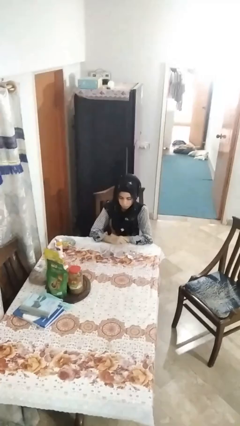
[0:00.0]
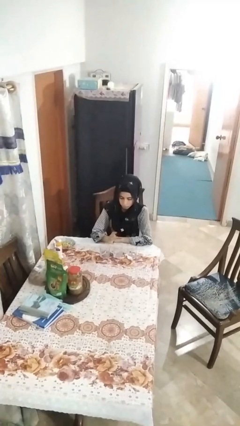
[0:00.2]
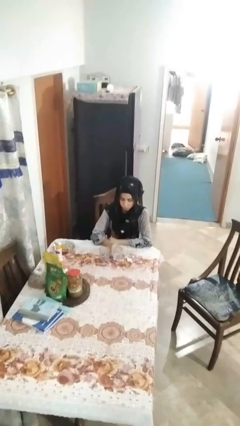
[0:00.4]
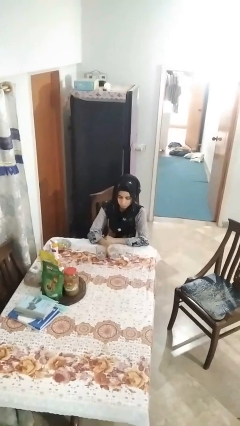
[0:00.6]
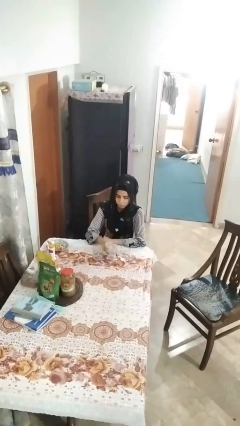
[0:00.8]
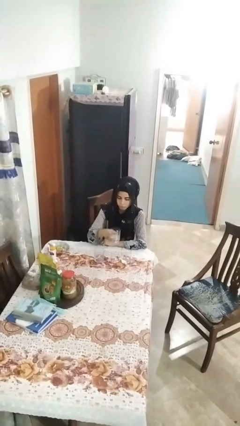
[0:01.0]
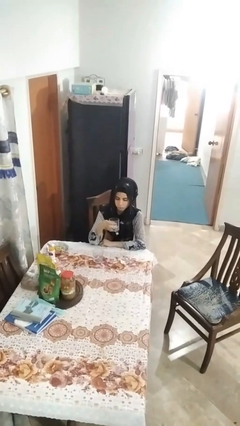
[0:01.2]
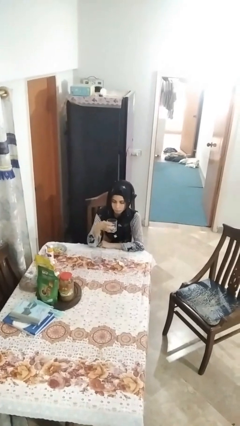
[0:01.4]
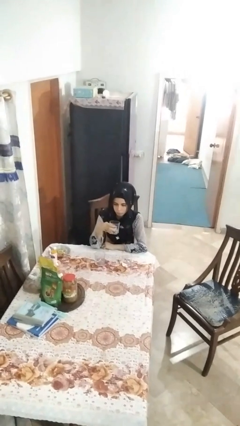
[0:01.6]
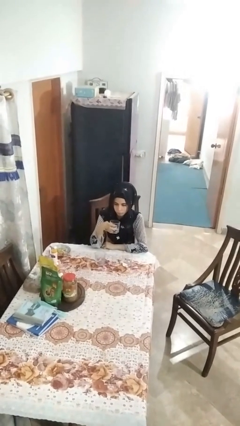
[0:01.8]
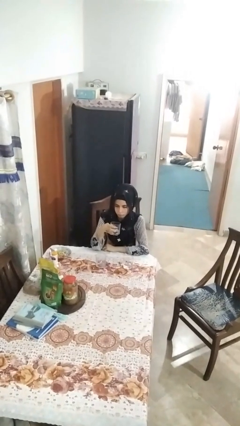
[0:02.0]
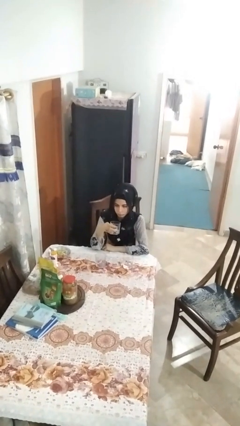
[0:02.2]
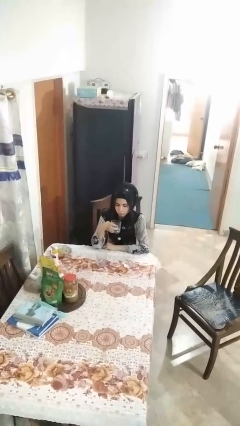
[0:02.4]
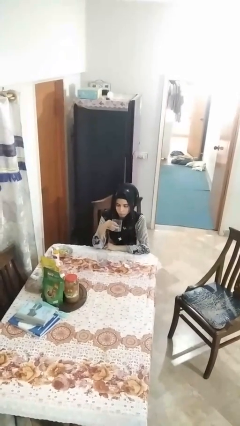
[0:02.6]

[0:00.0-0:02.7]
person picks up object from table

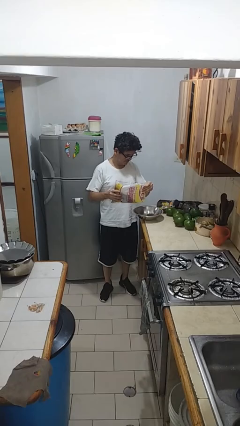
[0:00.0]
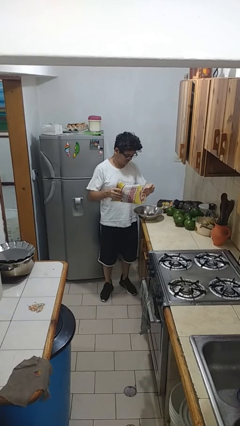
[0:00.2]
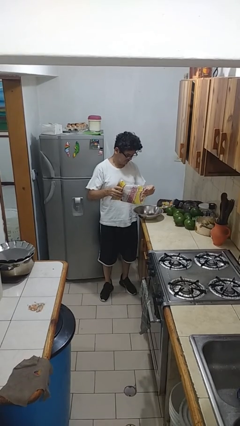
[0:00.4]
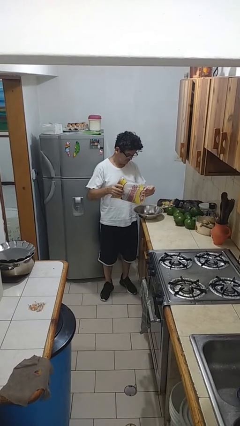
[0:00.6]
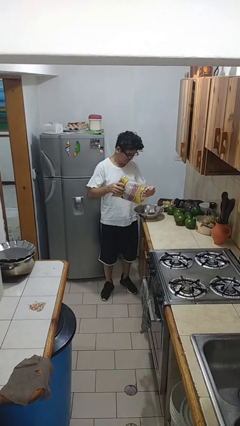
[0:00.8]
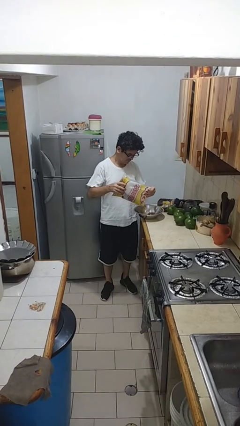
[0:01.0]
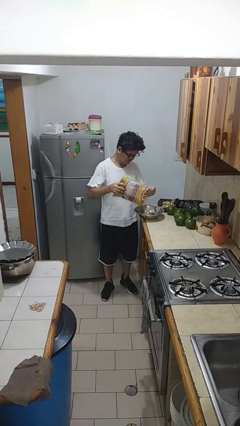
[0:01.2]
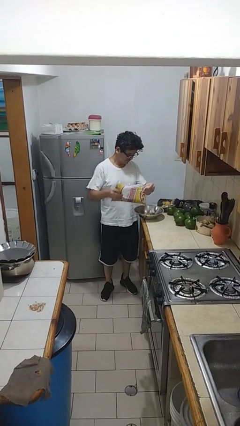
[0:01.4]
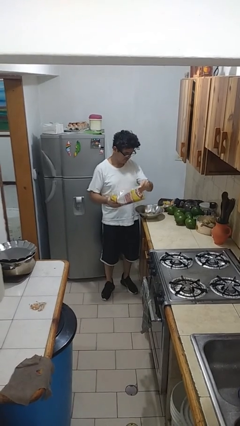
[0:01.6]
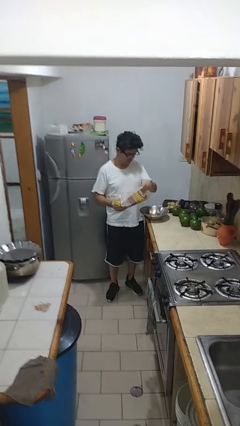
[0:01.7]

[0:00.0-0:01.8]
person pours into bowl

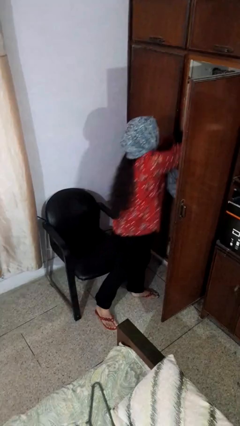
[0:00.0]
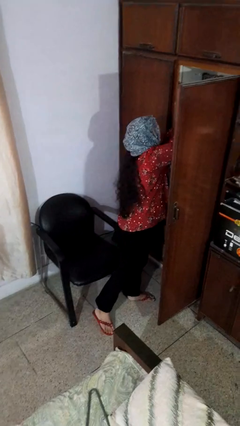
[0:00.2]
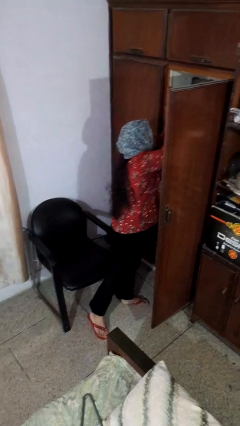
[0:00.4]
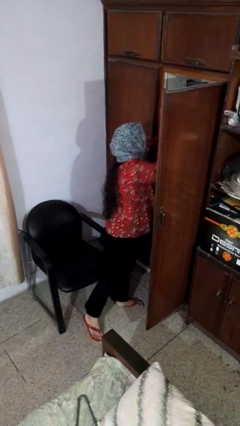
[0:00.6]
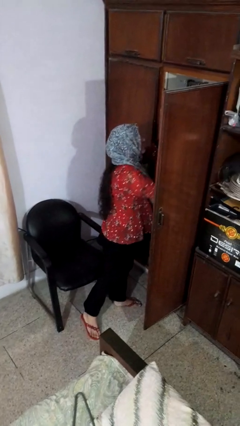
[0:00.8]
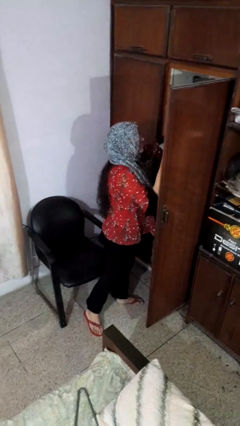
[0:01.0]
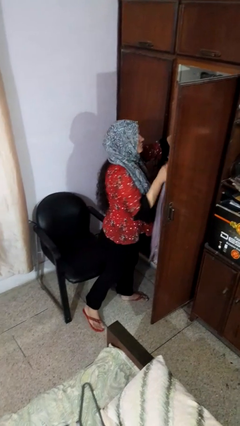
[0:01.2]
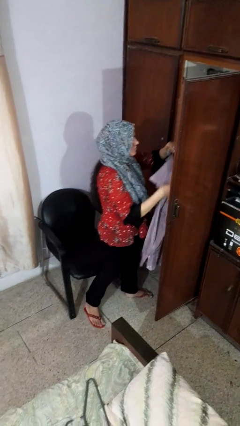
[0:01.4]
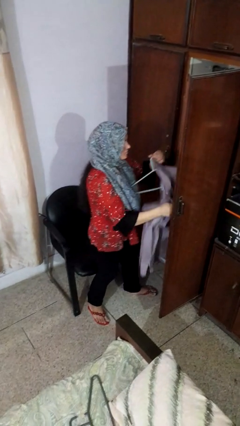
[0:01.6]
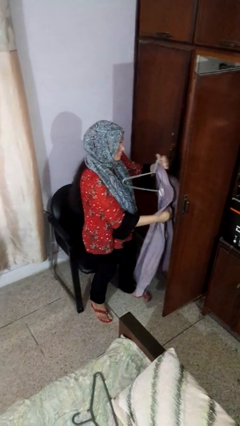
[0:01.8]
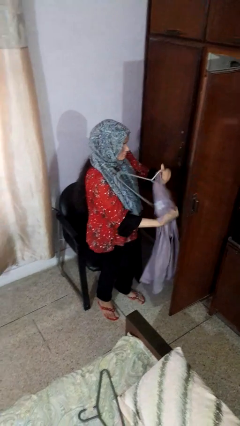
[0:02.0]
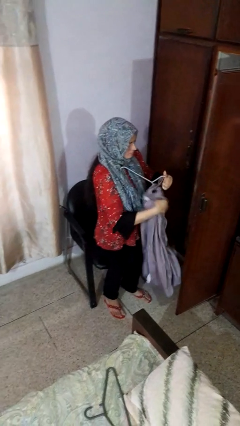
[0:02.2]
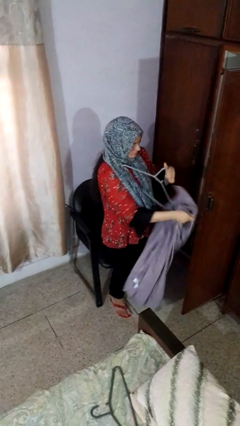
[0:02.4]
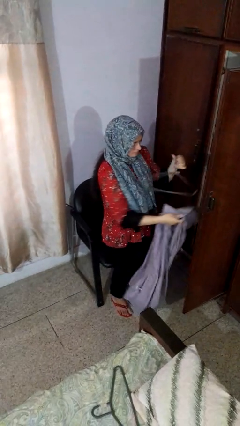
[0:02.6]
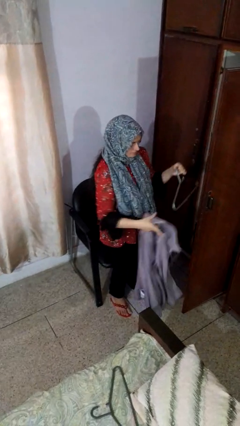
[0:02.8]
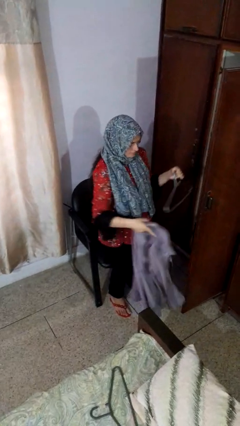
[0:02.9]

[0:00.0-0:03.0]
person takes clothes from closet

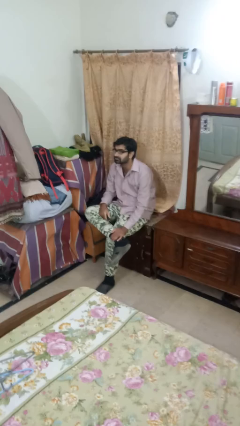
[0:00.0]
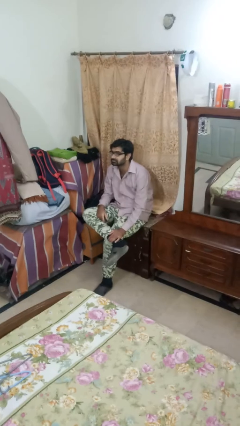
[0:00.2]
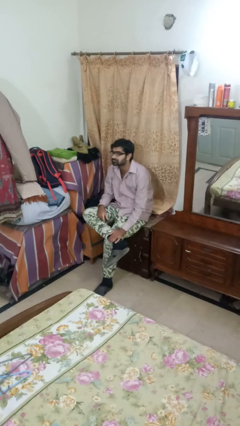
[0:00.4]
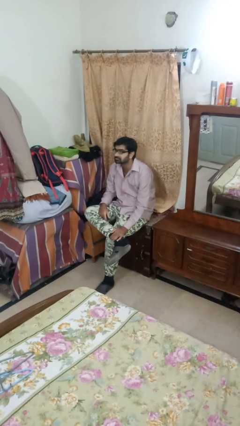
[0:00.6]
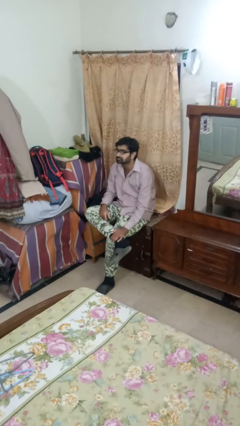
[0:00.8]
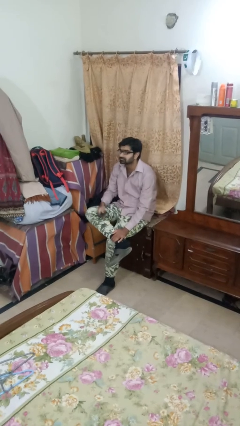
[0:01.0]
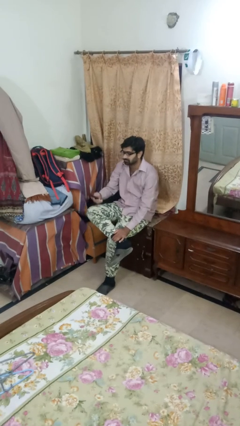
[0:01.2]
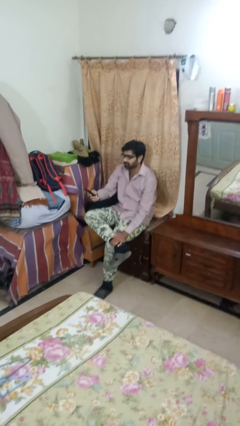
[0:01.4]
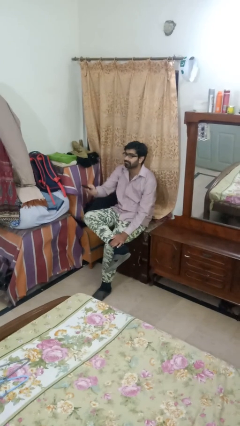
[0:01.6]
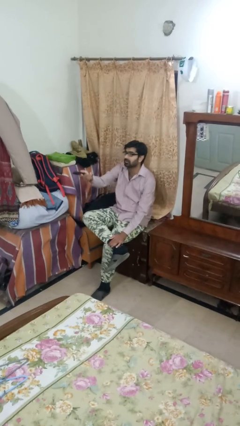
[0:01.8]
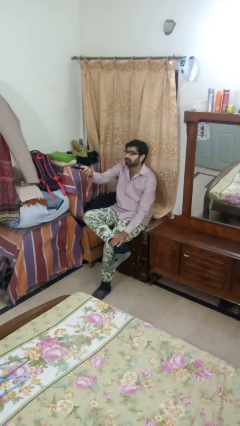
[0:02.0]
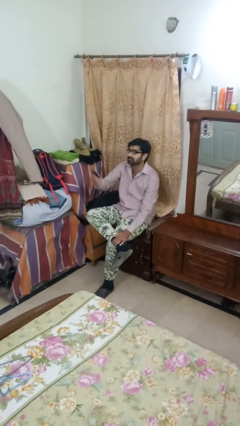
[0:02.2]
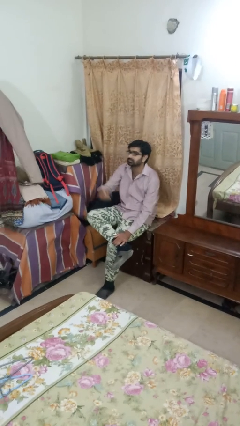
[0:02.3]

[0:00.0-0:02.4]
person uses television remote

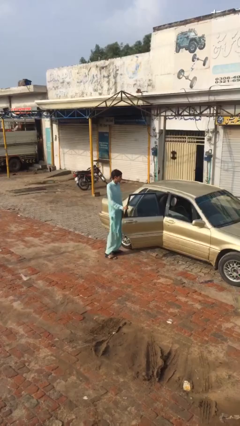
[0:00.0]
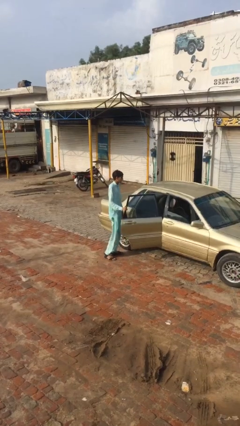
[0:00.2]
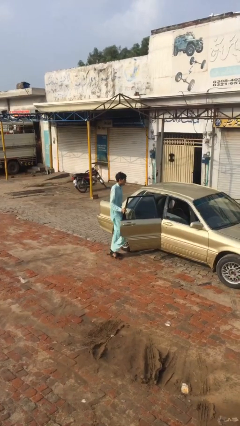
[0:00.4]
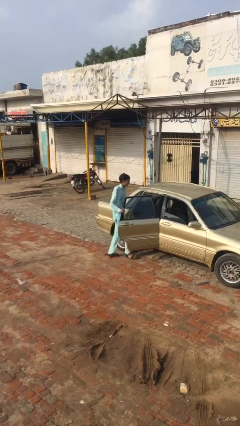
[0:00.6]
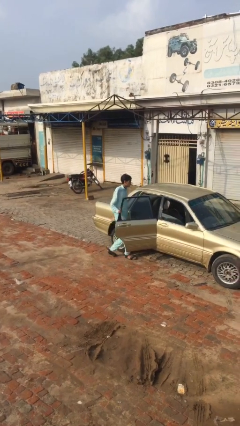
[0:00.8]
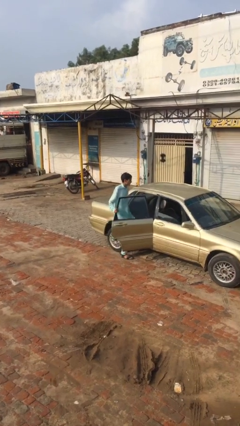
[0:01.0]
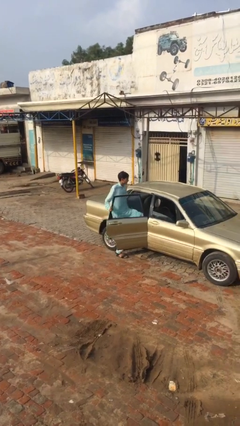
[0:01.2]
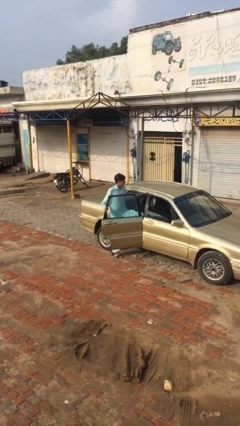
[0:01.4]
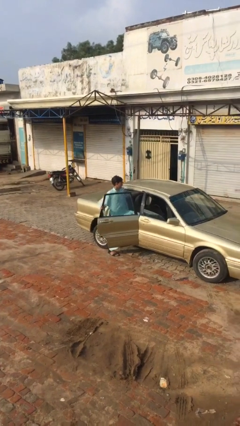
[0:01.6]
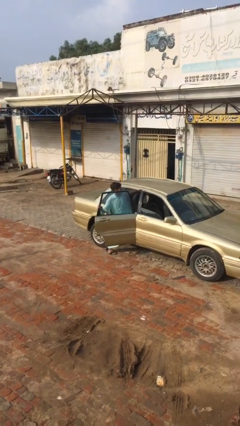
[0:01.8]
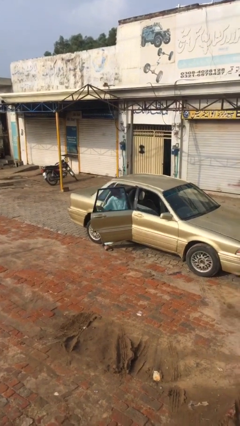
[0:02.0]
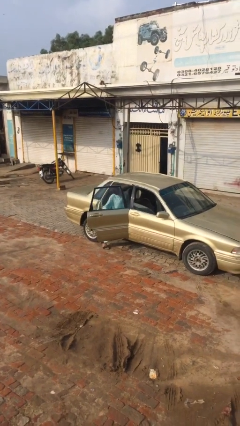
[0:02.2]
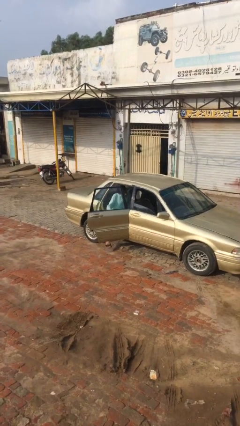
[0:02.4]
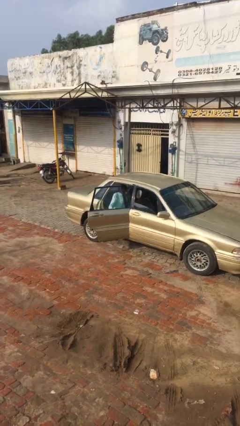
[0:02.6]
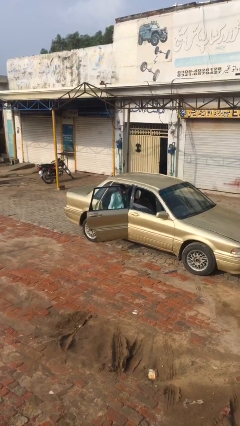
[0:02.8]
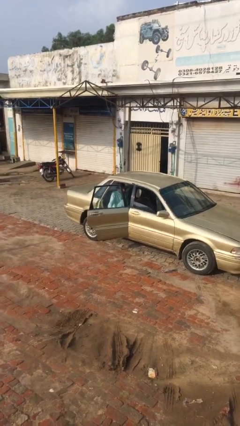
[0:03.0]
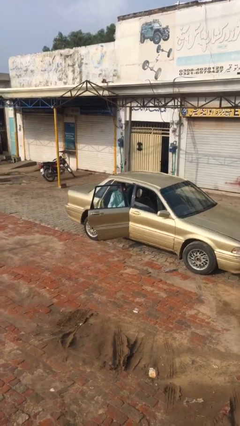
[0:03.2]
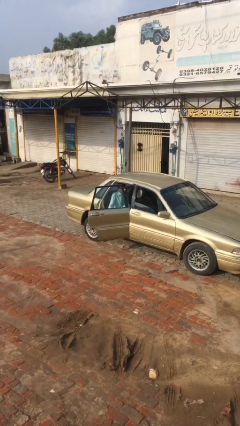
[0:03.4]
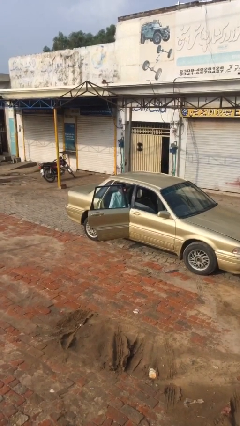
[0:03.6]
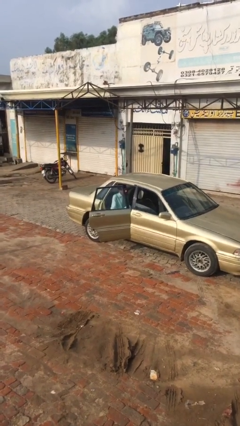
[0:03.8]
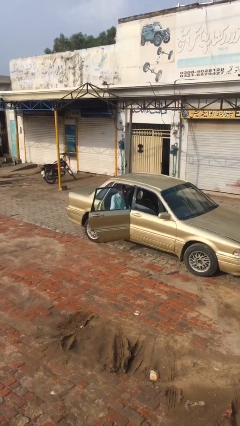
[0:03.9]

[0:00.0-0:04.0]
person enters car

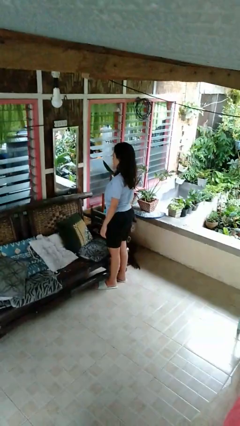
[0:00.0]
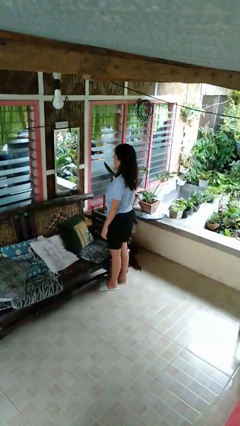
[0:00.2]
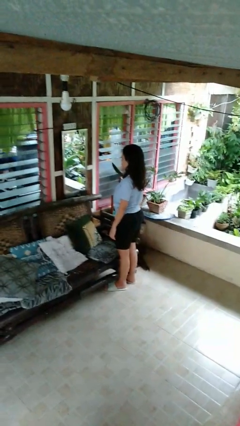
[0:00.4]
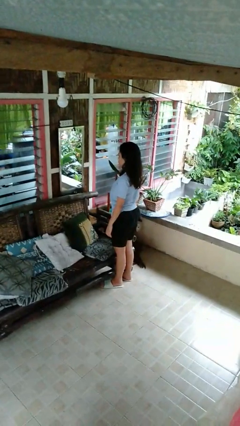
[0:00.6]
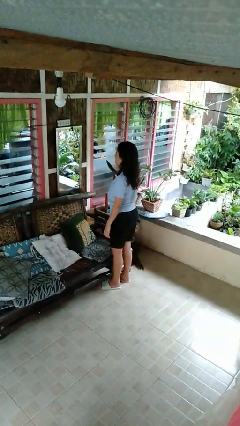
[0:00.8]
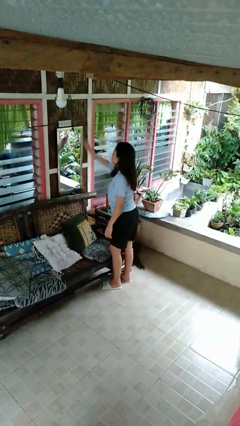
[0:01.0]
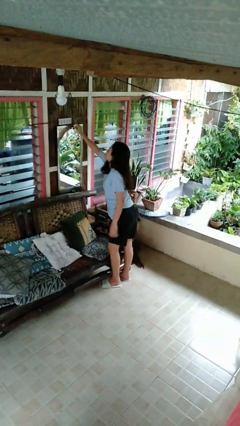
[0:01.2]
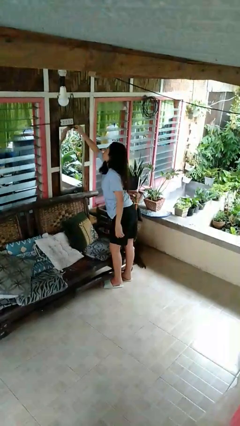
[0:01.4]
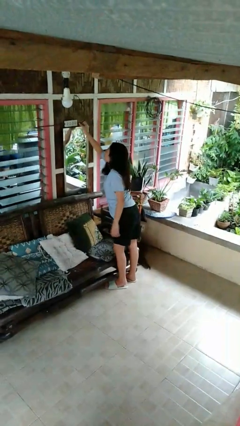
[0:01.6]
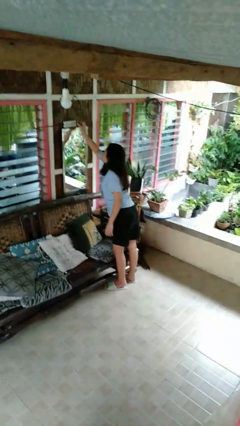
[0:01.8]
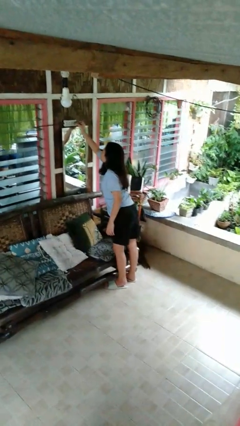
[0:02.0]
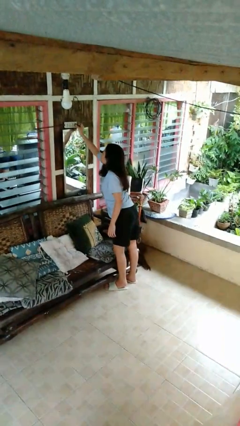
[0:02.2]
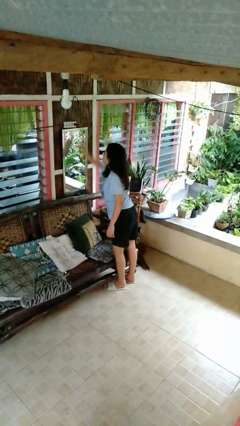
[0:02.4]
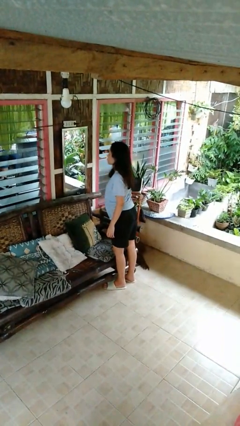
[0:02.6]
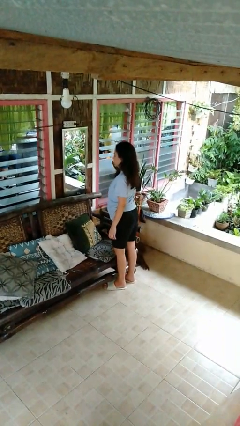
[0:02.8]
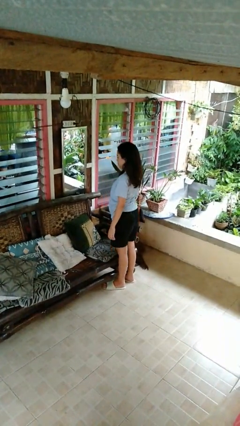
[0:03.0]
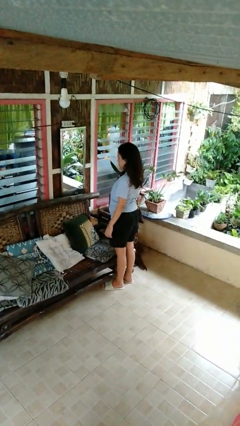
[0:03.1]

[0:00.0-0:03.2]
person plugs into electrical socket

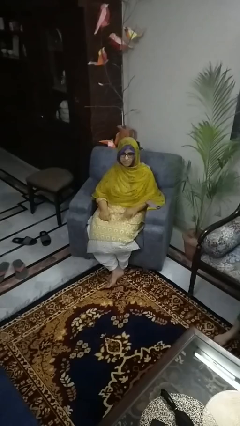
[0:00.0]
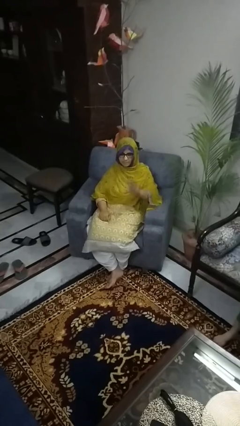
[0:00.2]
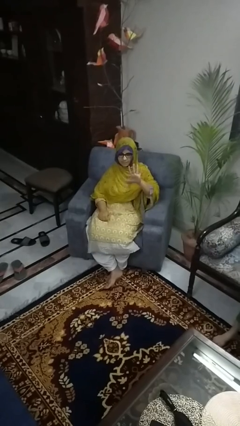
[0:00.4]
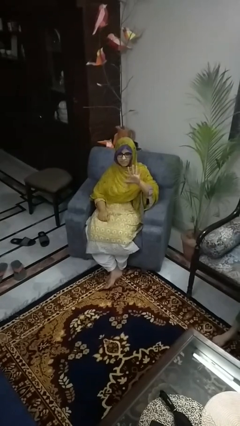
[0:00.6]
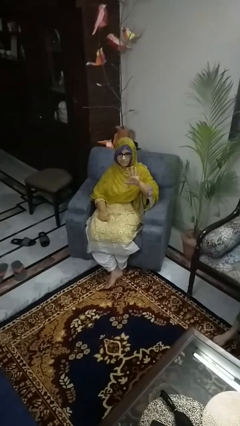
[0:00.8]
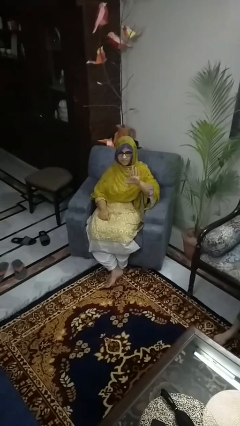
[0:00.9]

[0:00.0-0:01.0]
person gestures number five
